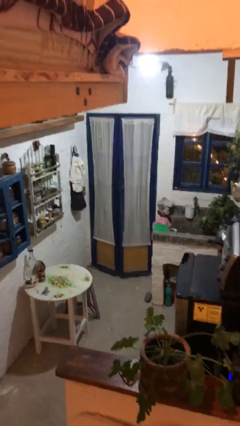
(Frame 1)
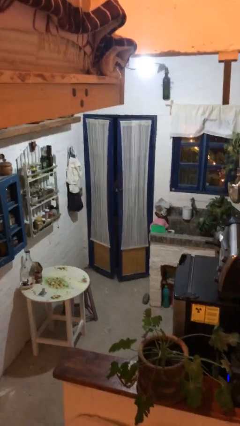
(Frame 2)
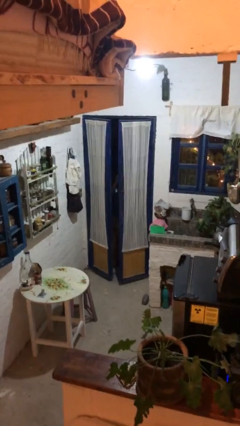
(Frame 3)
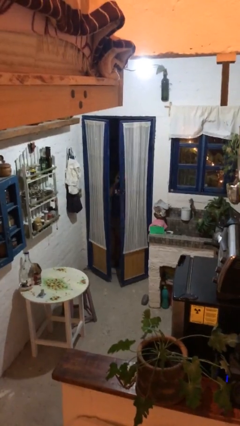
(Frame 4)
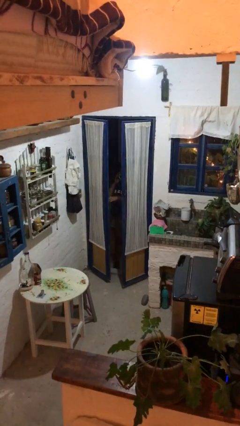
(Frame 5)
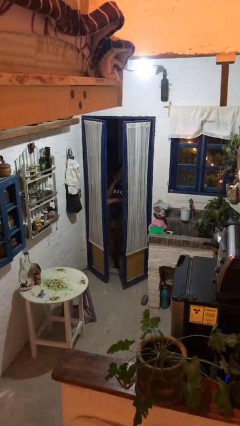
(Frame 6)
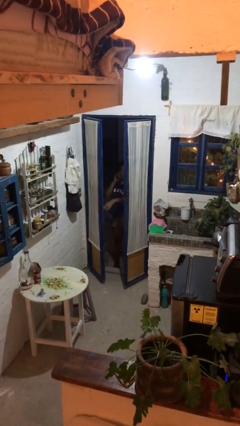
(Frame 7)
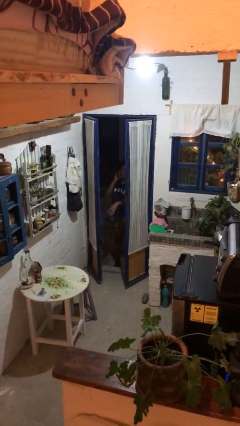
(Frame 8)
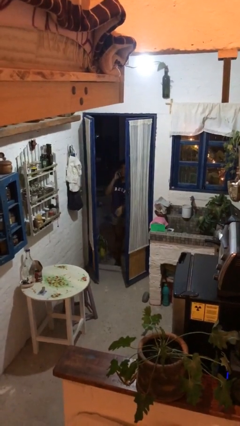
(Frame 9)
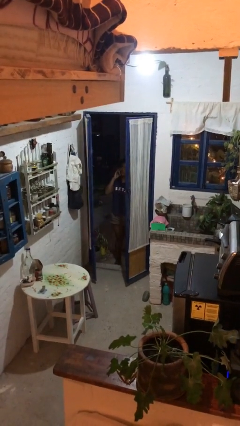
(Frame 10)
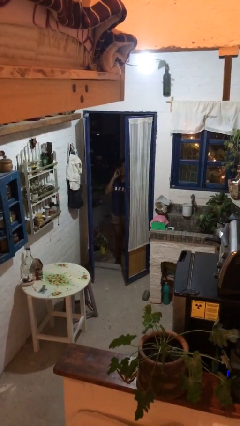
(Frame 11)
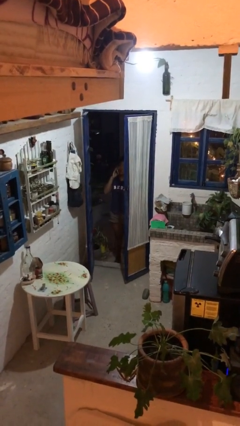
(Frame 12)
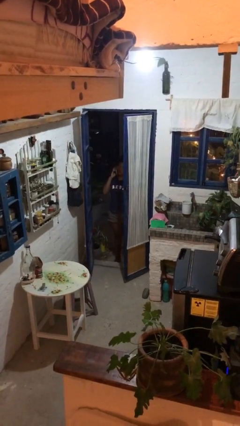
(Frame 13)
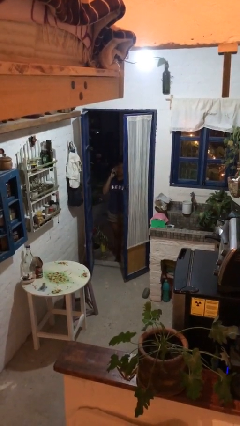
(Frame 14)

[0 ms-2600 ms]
person opens facility door

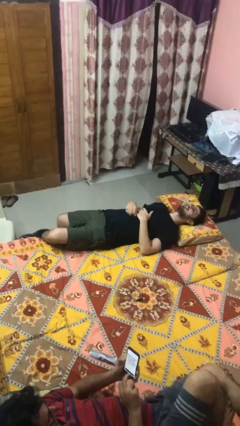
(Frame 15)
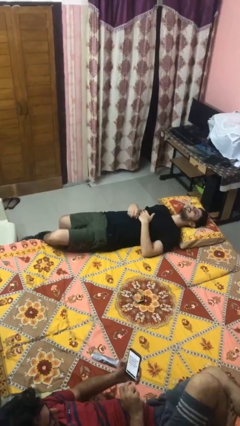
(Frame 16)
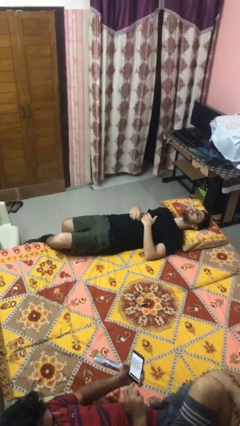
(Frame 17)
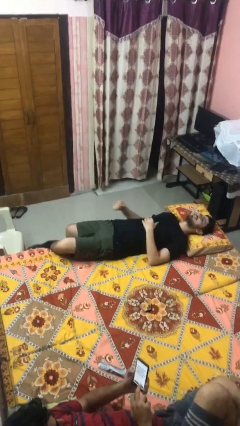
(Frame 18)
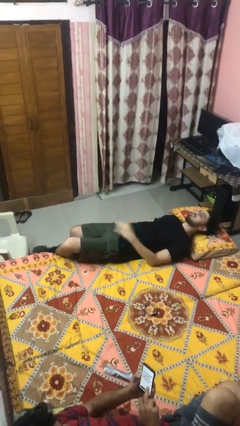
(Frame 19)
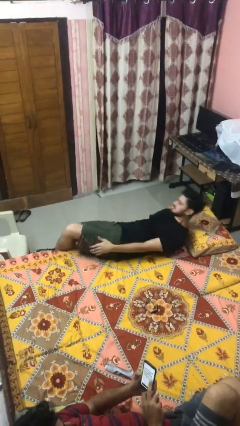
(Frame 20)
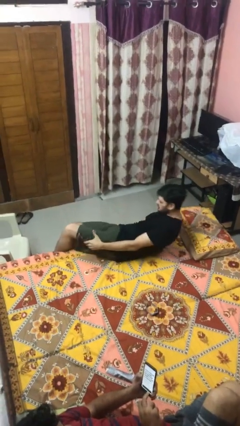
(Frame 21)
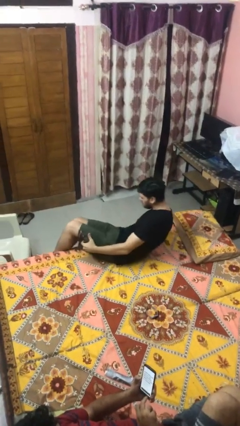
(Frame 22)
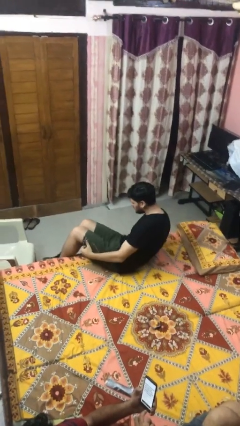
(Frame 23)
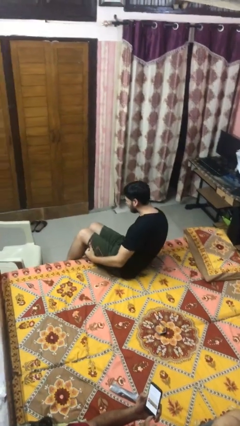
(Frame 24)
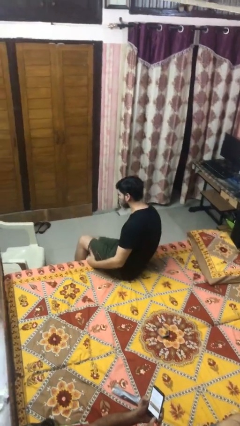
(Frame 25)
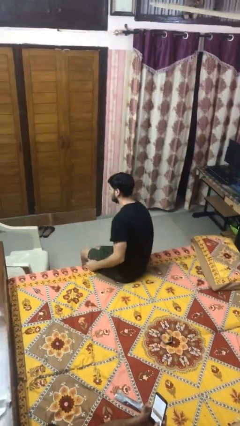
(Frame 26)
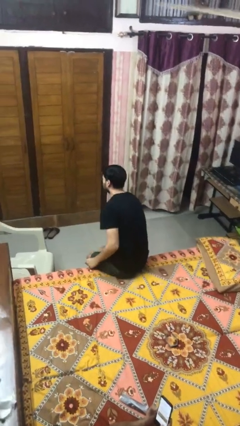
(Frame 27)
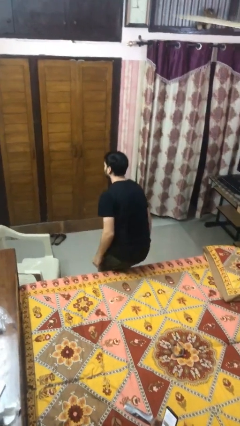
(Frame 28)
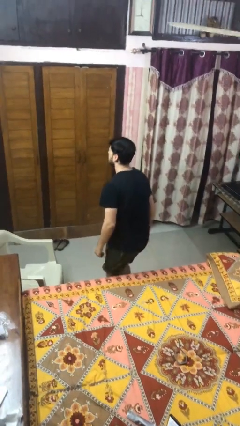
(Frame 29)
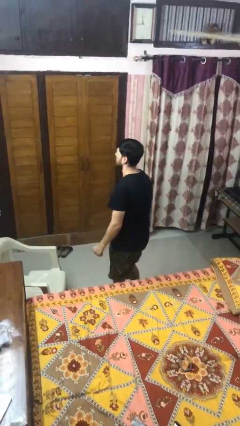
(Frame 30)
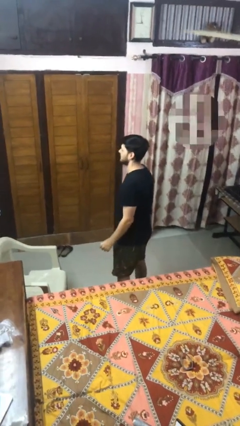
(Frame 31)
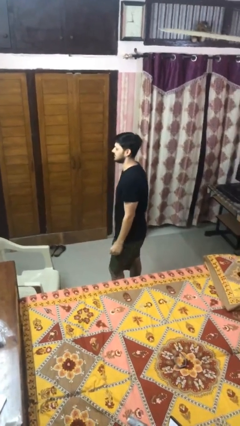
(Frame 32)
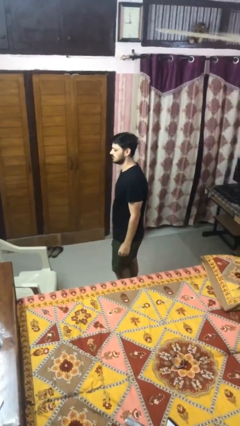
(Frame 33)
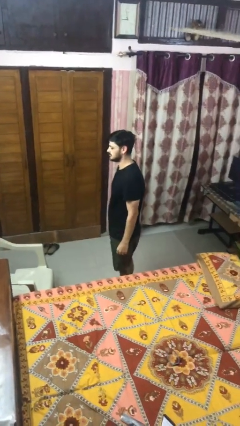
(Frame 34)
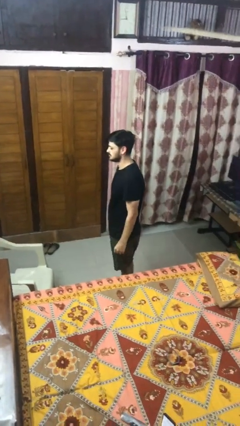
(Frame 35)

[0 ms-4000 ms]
person stands up

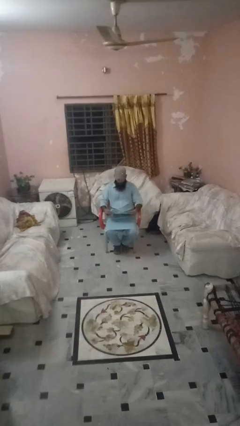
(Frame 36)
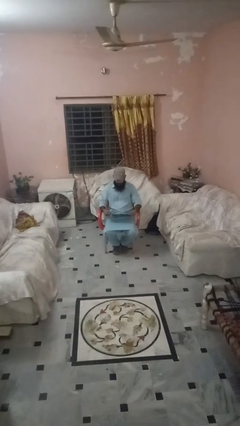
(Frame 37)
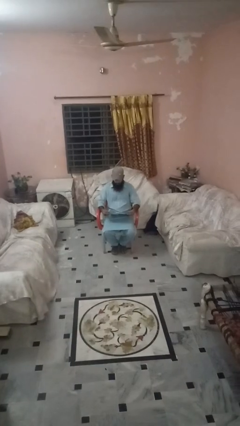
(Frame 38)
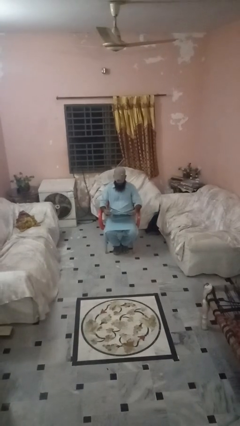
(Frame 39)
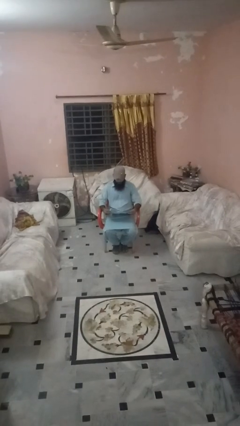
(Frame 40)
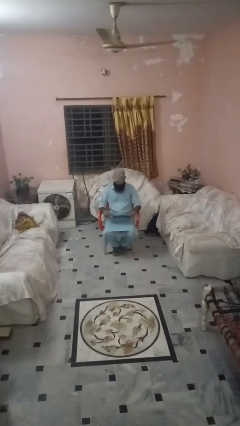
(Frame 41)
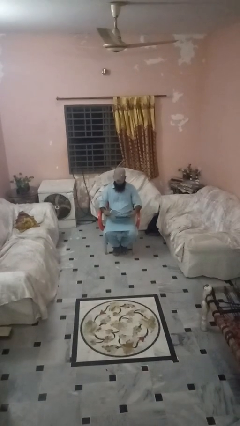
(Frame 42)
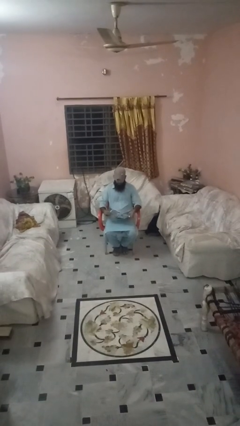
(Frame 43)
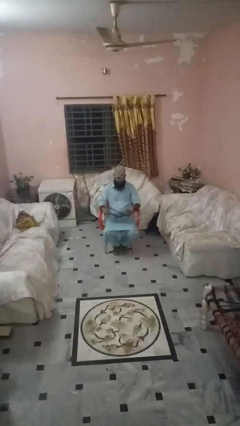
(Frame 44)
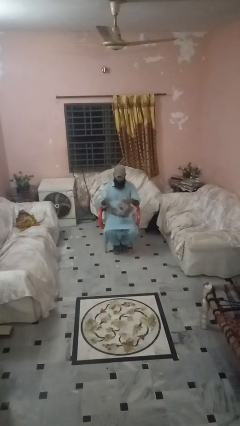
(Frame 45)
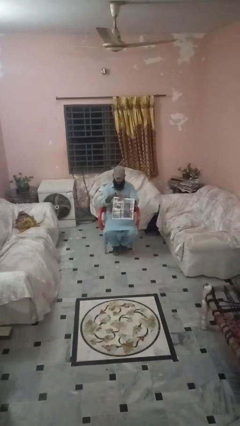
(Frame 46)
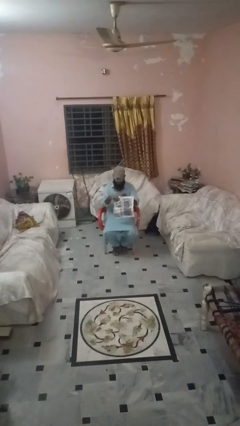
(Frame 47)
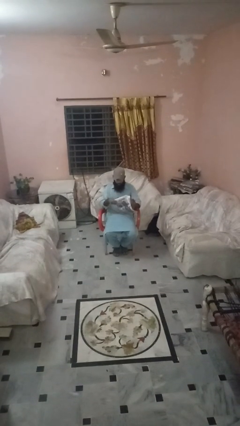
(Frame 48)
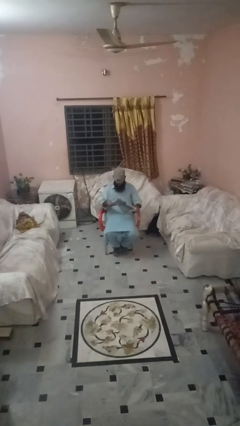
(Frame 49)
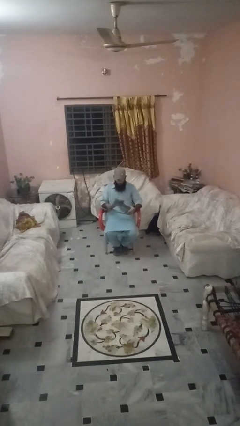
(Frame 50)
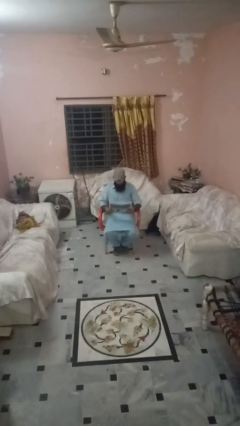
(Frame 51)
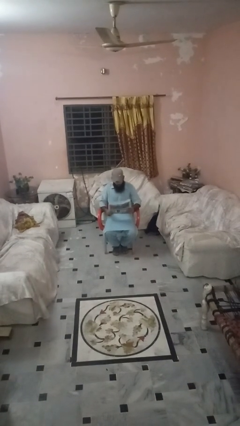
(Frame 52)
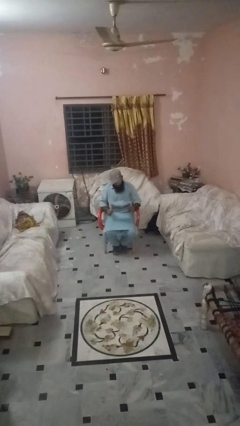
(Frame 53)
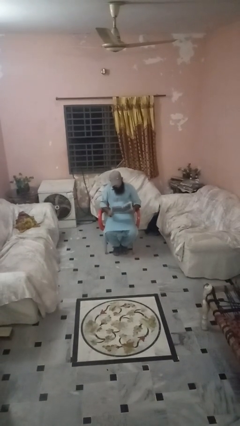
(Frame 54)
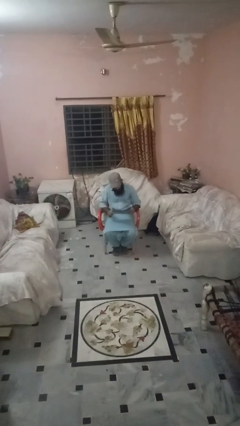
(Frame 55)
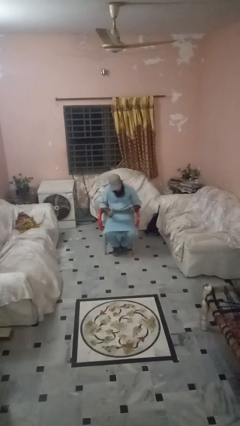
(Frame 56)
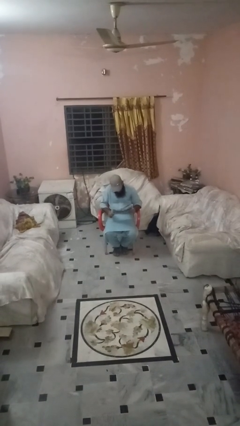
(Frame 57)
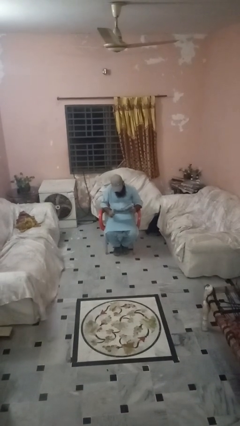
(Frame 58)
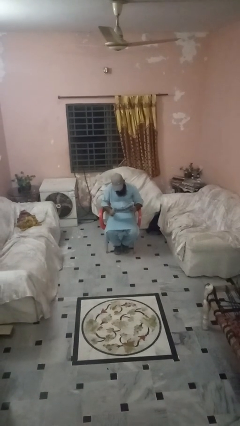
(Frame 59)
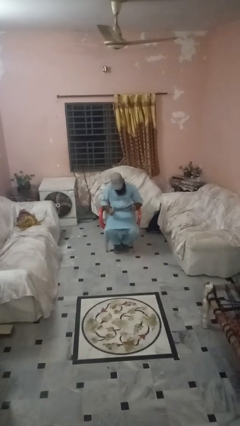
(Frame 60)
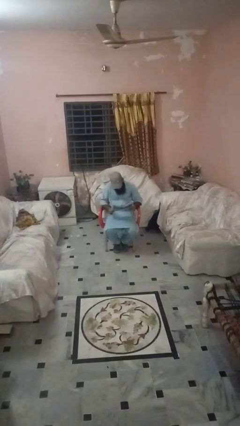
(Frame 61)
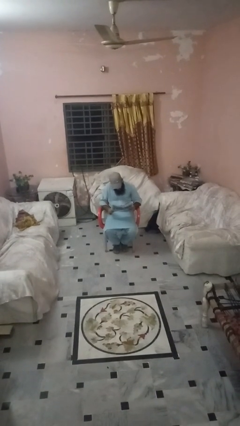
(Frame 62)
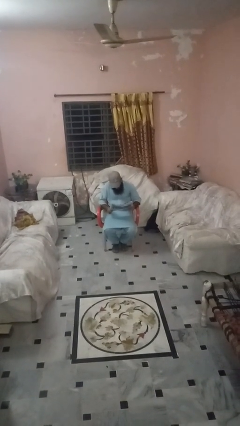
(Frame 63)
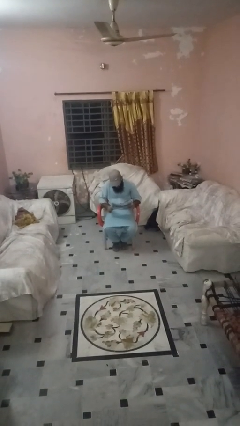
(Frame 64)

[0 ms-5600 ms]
person reads newspaper

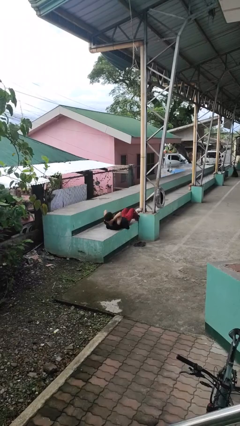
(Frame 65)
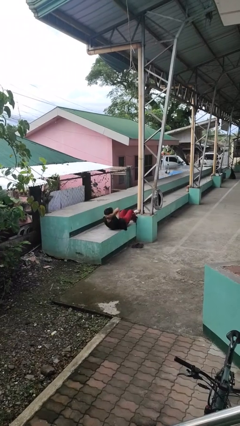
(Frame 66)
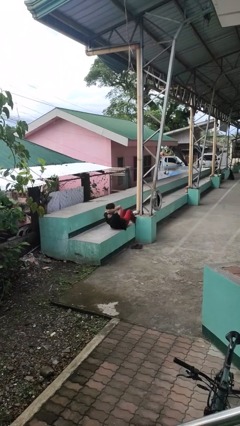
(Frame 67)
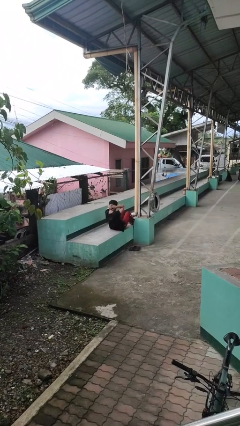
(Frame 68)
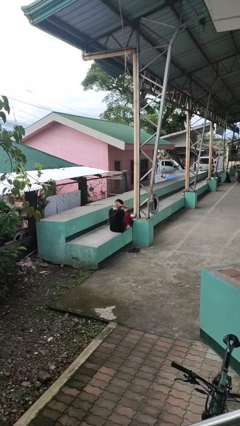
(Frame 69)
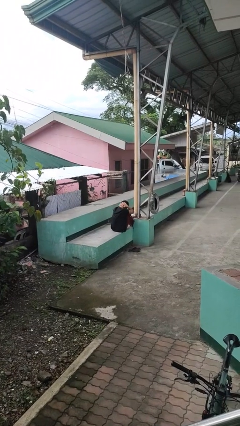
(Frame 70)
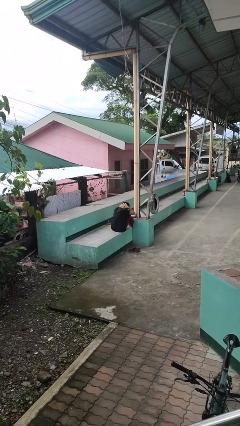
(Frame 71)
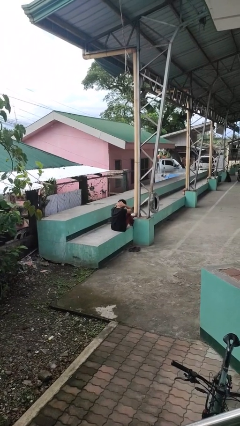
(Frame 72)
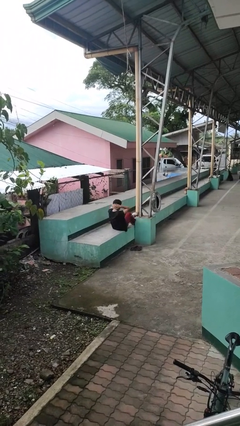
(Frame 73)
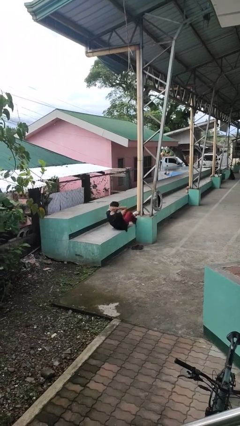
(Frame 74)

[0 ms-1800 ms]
person exercises with situp

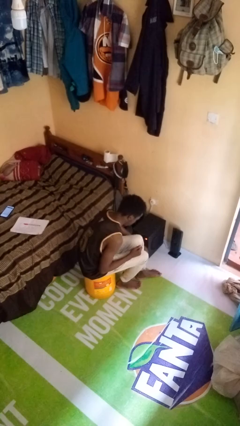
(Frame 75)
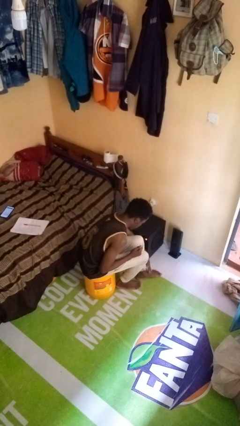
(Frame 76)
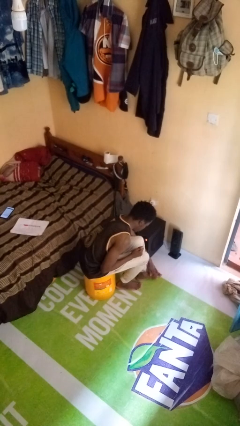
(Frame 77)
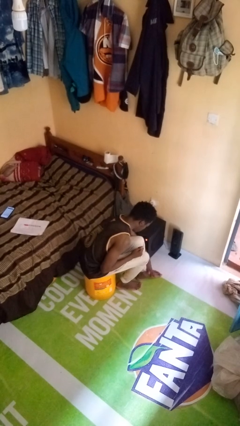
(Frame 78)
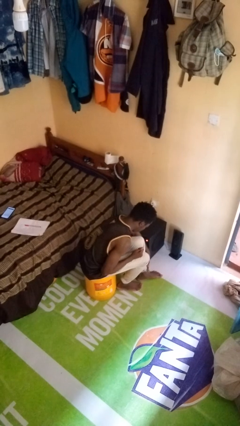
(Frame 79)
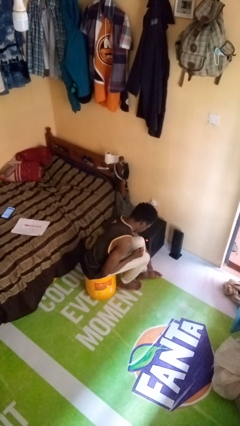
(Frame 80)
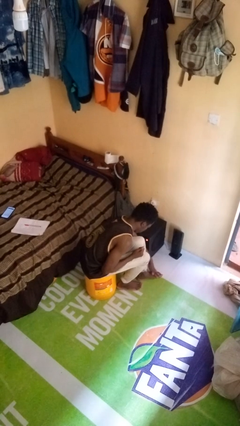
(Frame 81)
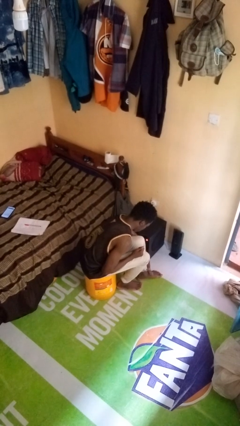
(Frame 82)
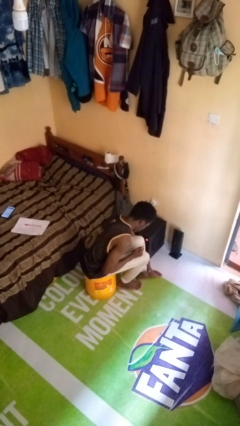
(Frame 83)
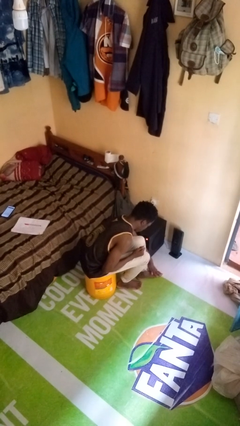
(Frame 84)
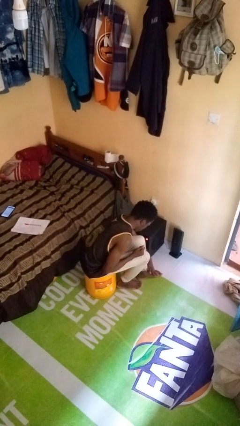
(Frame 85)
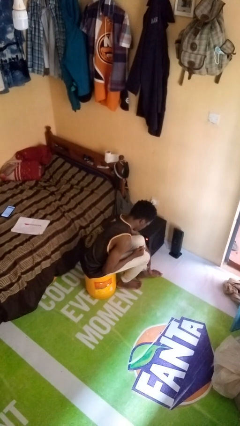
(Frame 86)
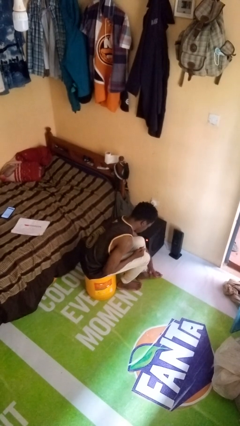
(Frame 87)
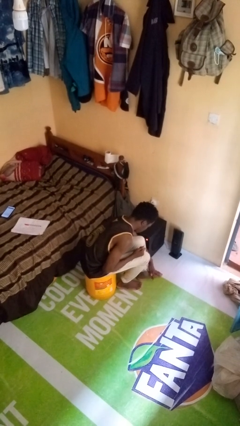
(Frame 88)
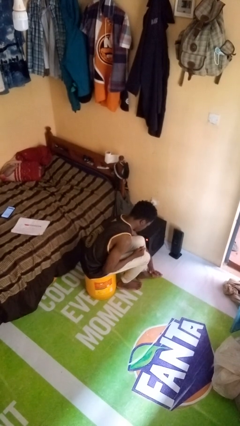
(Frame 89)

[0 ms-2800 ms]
person rubs foot

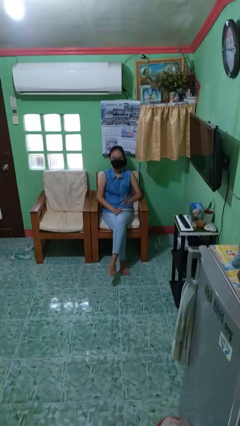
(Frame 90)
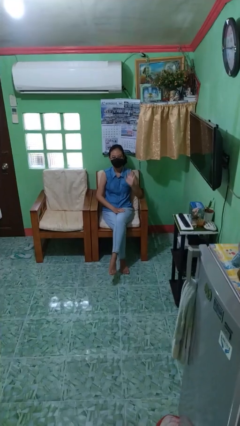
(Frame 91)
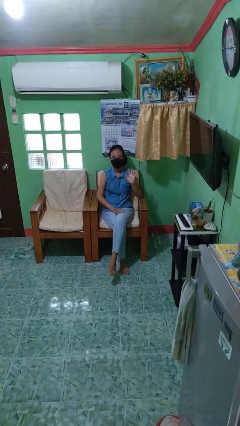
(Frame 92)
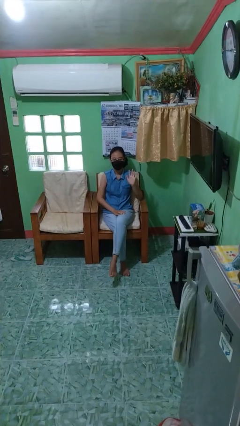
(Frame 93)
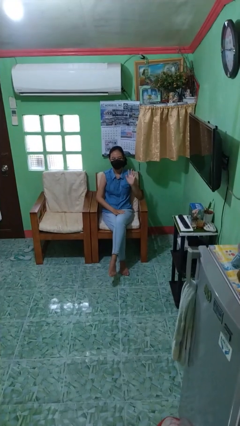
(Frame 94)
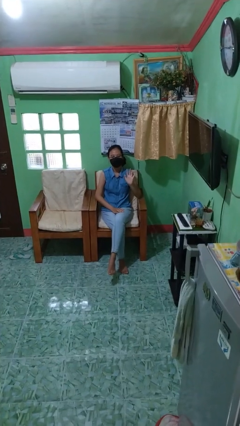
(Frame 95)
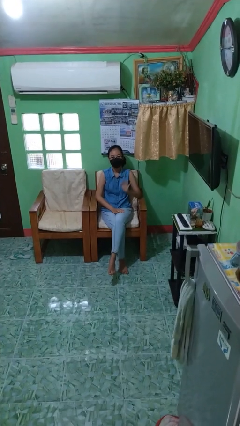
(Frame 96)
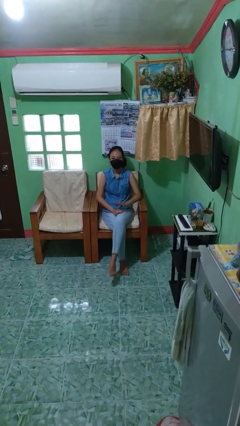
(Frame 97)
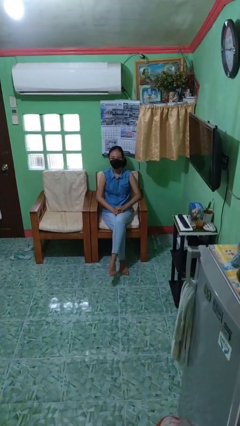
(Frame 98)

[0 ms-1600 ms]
person gestures number five
